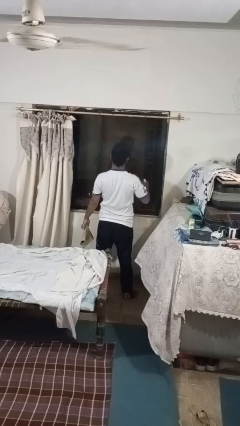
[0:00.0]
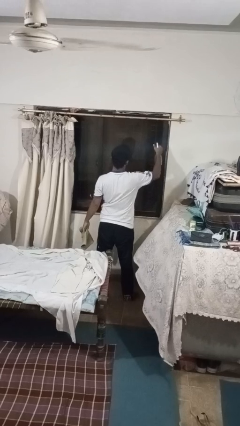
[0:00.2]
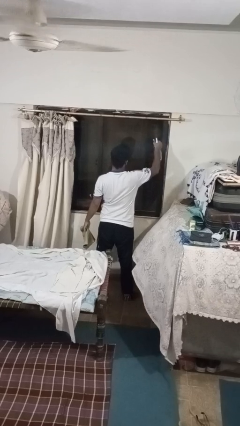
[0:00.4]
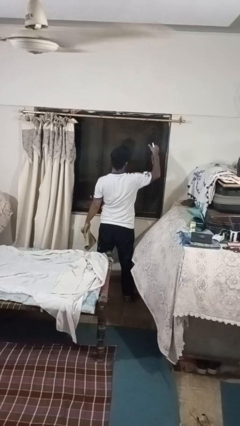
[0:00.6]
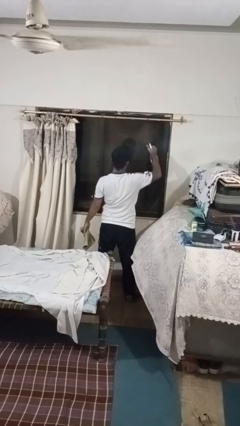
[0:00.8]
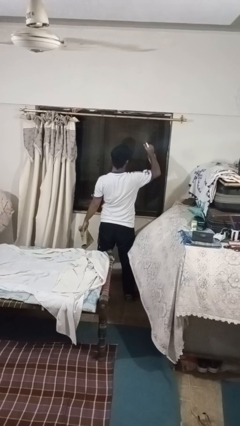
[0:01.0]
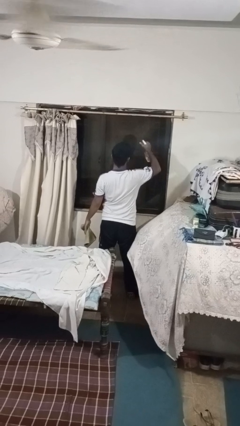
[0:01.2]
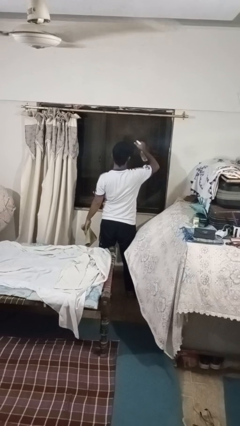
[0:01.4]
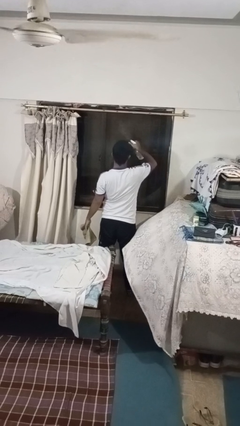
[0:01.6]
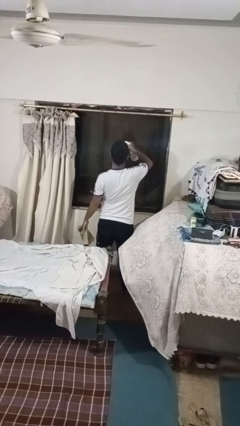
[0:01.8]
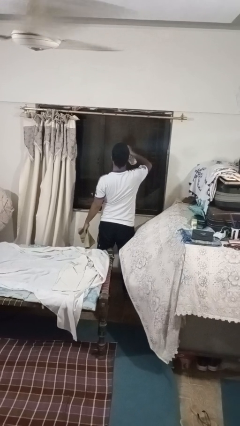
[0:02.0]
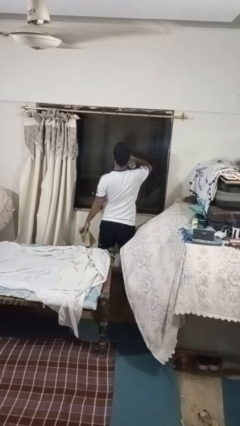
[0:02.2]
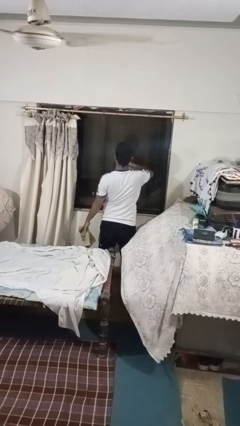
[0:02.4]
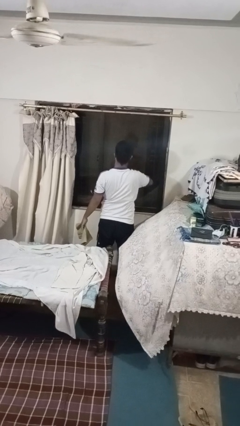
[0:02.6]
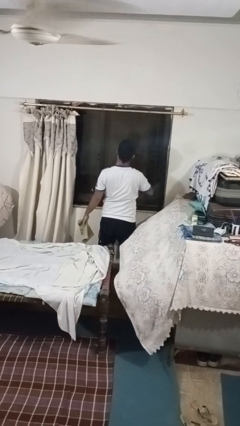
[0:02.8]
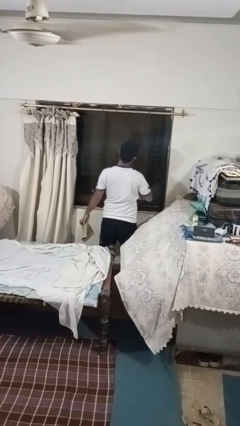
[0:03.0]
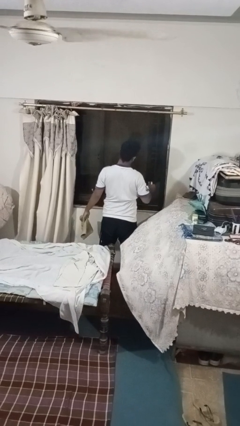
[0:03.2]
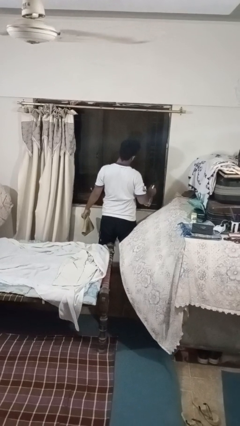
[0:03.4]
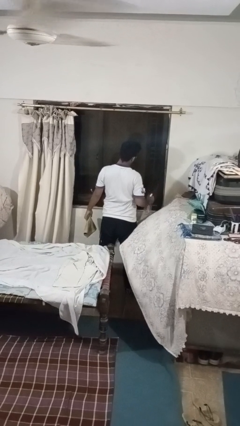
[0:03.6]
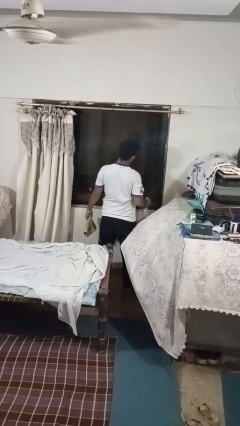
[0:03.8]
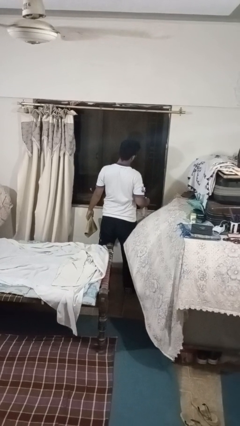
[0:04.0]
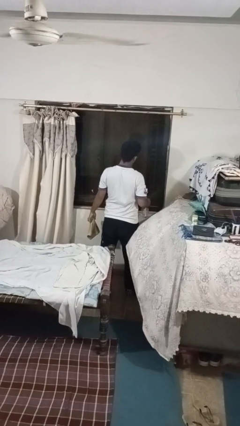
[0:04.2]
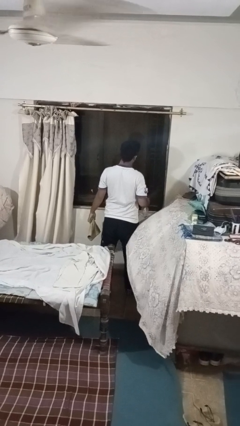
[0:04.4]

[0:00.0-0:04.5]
person sprays from bottle

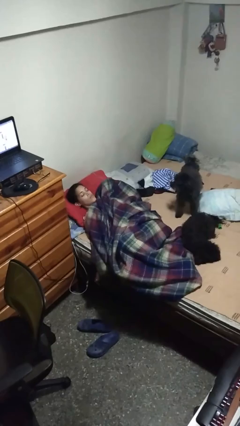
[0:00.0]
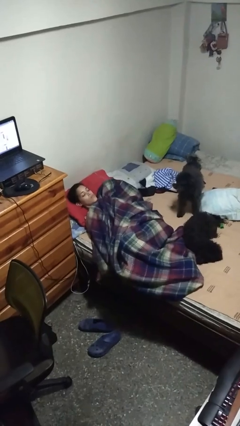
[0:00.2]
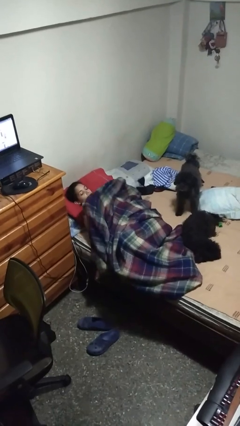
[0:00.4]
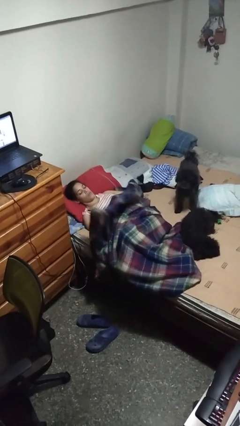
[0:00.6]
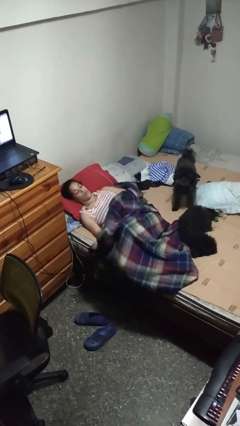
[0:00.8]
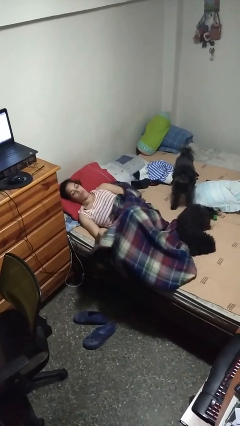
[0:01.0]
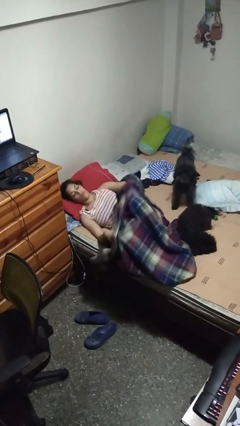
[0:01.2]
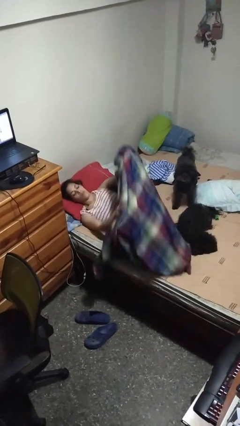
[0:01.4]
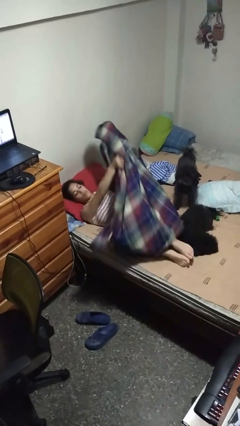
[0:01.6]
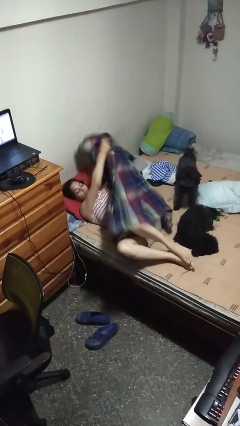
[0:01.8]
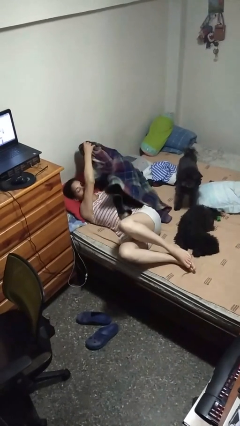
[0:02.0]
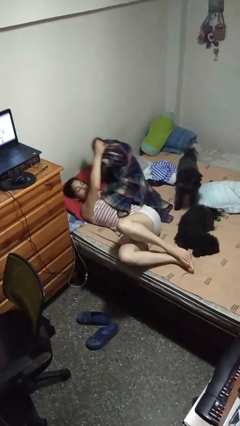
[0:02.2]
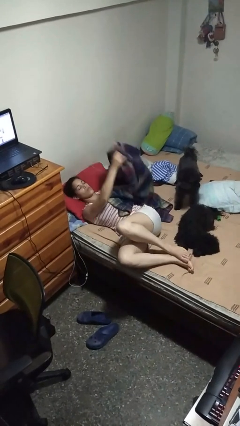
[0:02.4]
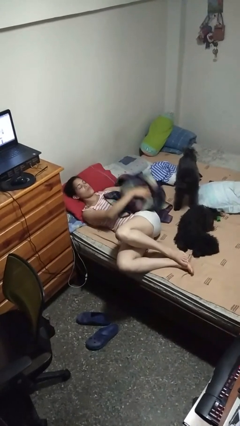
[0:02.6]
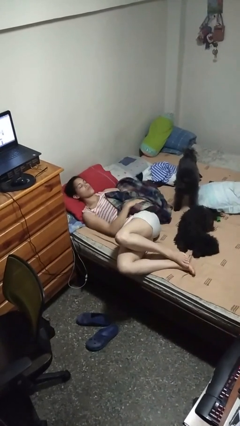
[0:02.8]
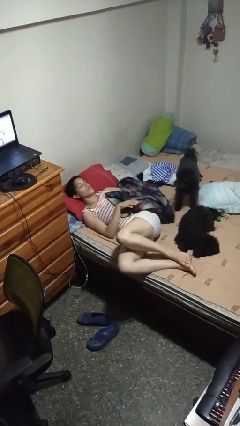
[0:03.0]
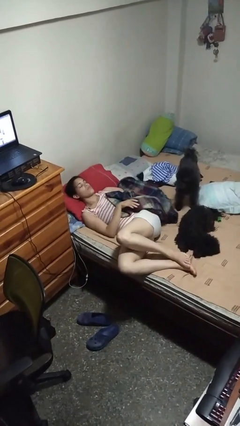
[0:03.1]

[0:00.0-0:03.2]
person uncovers with bedsheets

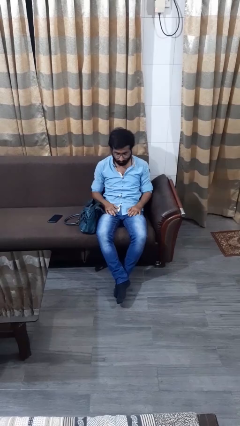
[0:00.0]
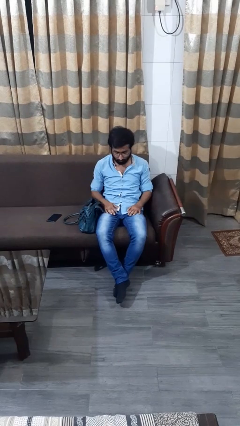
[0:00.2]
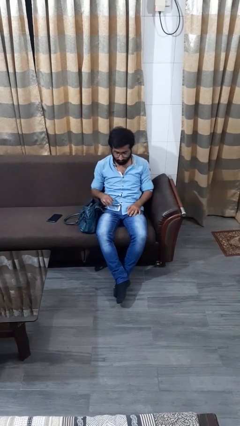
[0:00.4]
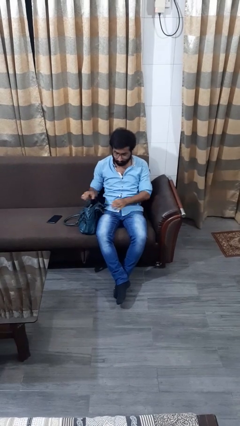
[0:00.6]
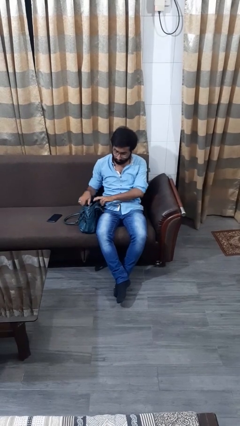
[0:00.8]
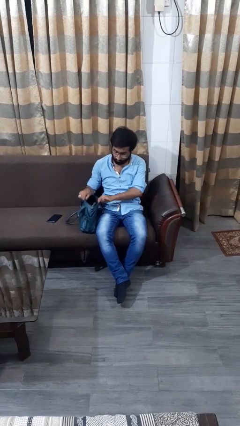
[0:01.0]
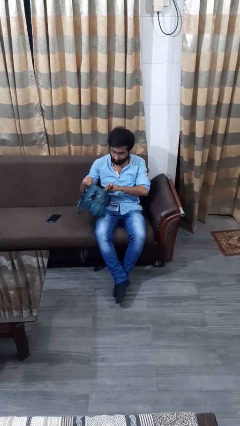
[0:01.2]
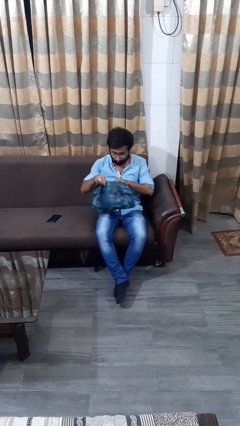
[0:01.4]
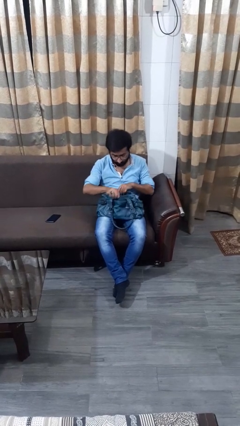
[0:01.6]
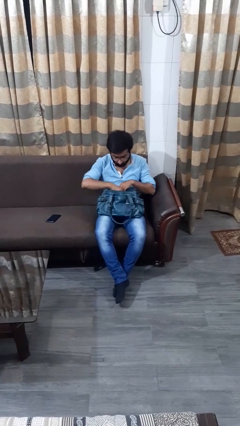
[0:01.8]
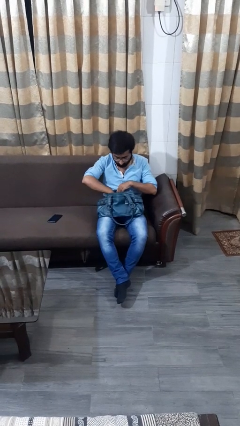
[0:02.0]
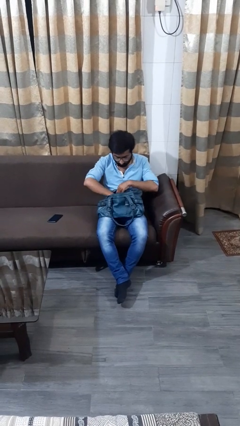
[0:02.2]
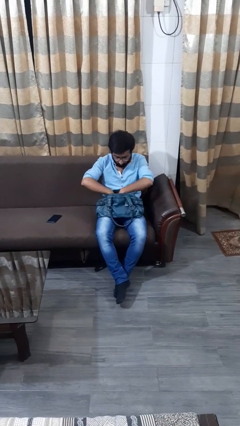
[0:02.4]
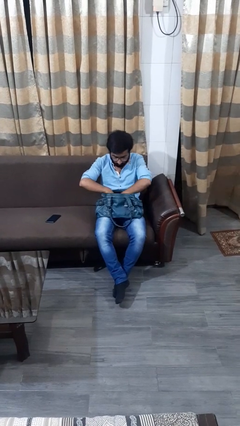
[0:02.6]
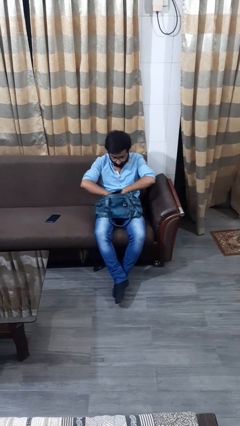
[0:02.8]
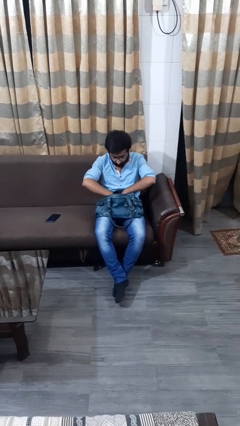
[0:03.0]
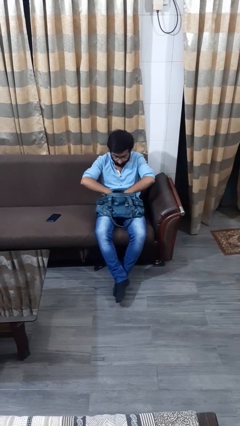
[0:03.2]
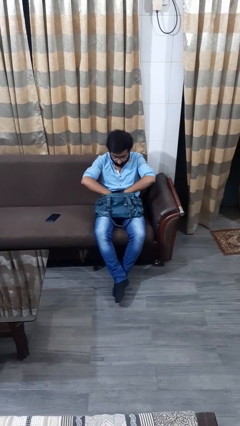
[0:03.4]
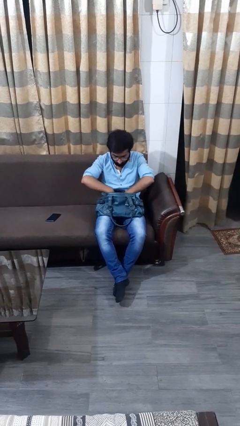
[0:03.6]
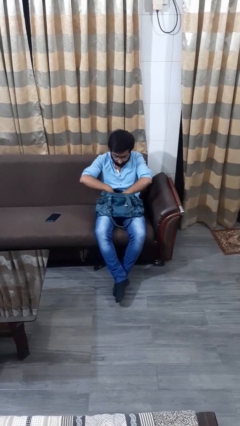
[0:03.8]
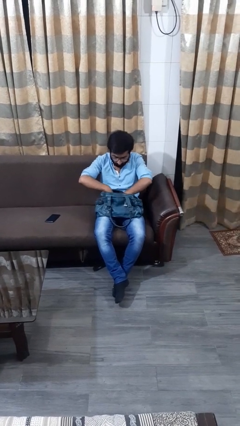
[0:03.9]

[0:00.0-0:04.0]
person searches in purse

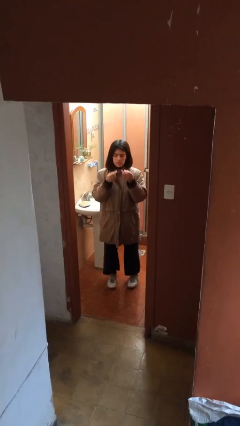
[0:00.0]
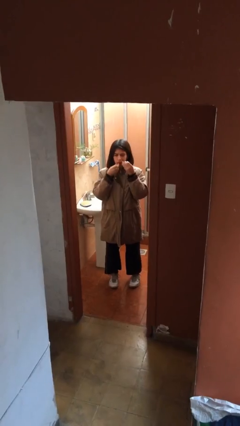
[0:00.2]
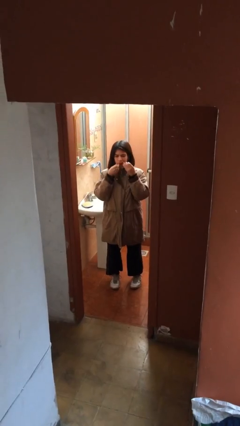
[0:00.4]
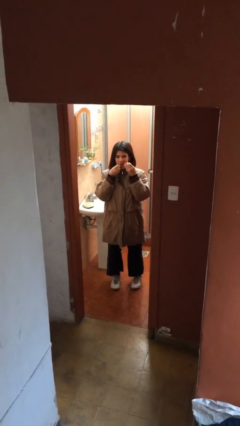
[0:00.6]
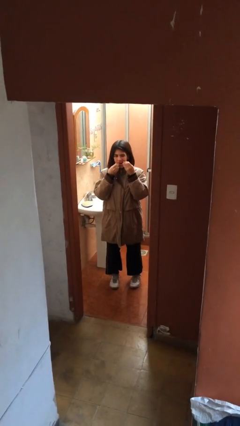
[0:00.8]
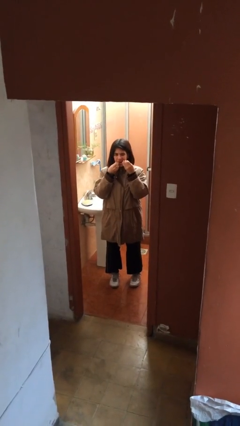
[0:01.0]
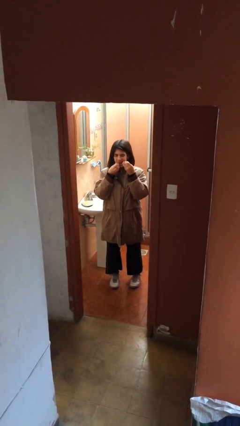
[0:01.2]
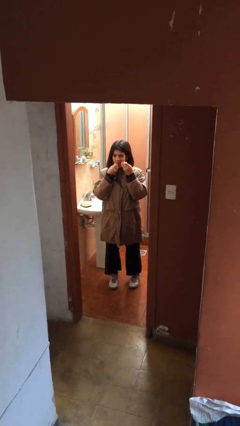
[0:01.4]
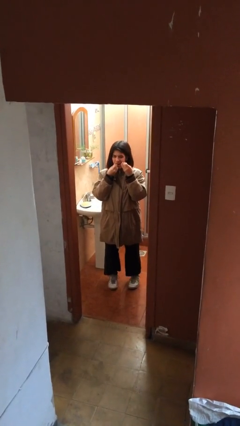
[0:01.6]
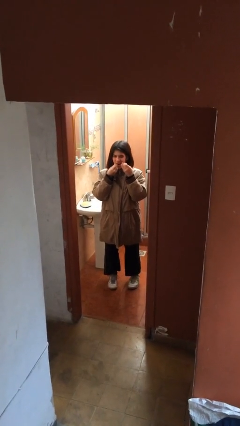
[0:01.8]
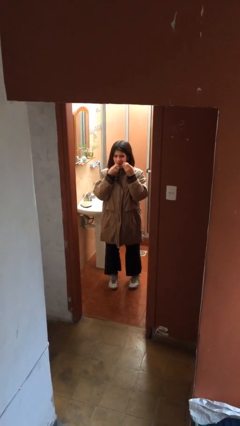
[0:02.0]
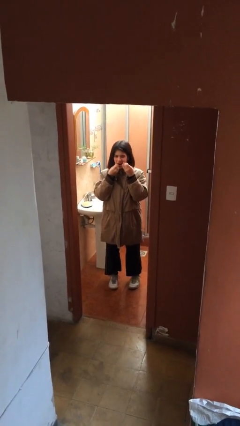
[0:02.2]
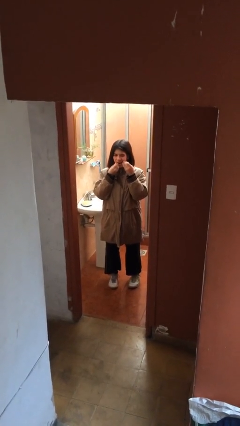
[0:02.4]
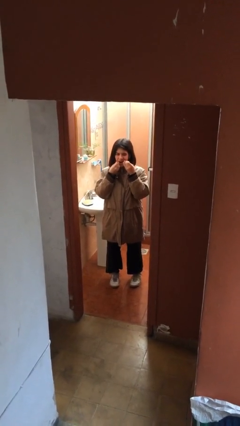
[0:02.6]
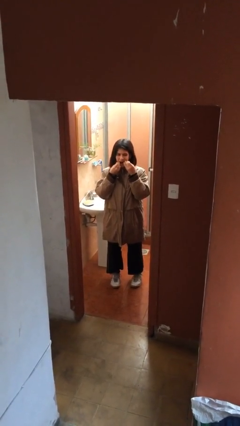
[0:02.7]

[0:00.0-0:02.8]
person flosses

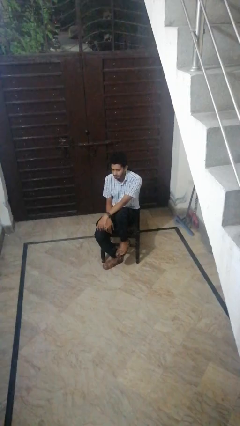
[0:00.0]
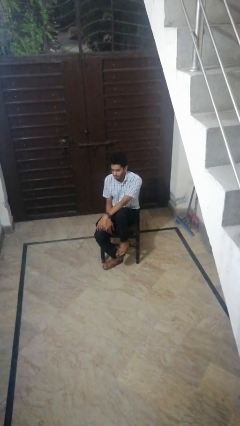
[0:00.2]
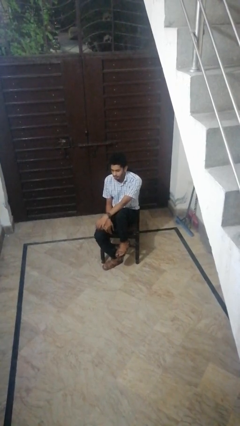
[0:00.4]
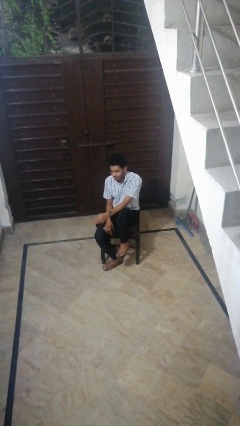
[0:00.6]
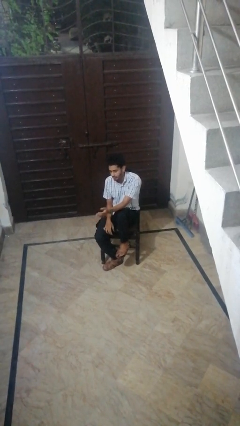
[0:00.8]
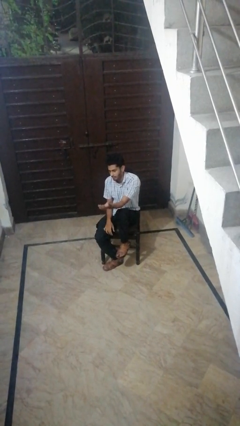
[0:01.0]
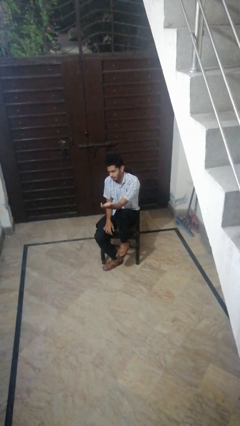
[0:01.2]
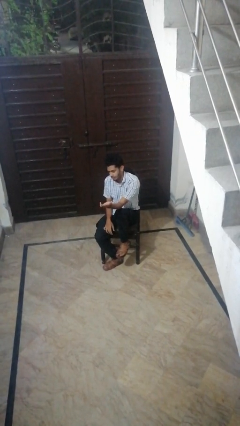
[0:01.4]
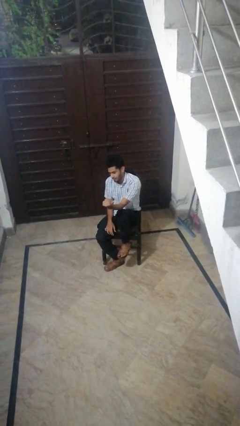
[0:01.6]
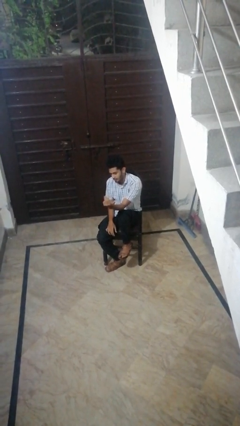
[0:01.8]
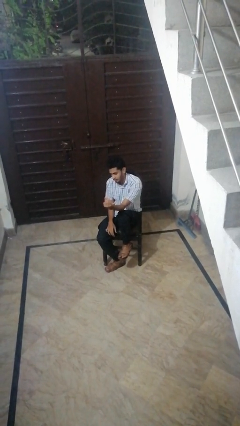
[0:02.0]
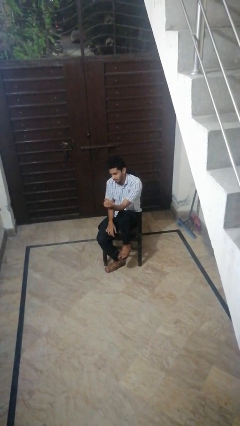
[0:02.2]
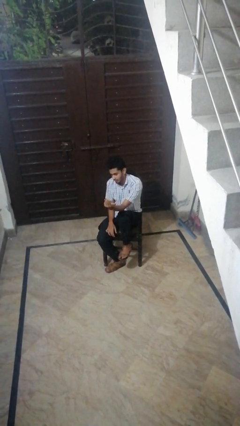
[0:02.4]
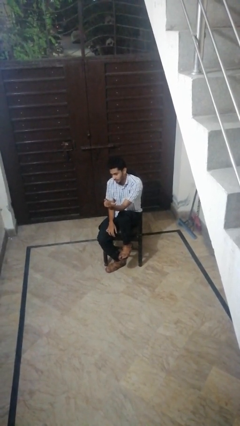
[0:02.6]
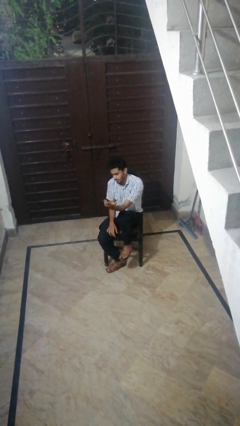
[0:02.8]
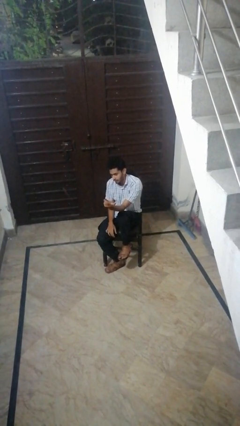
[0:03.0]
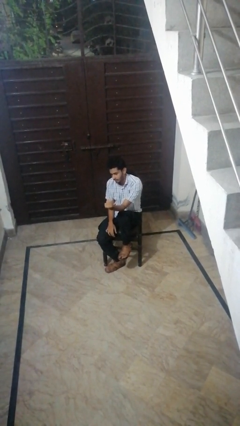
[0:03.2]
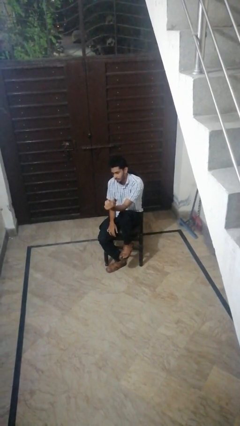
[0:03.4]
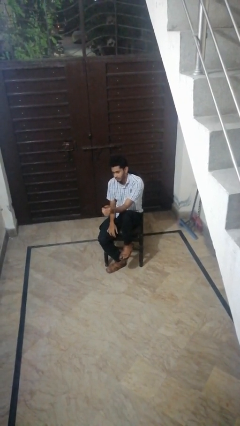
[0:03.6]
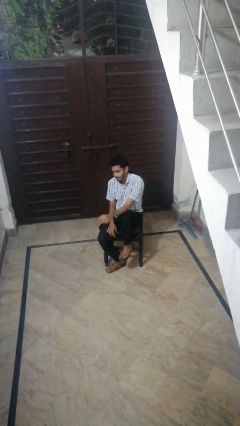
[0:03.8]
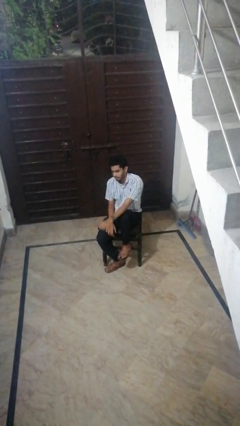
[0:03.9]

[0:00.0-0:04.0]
person gestures come here
